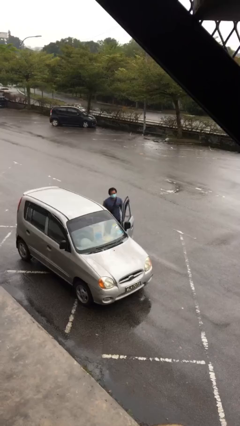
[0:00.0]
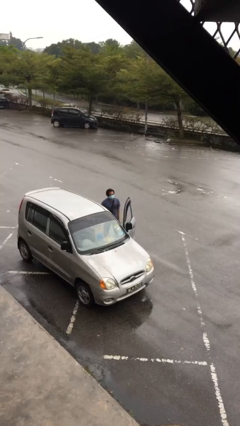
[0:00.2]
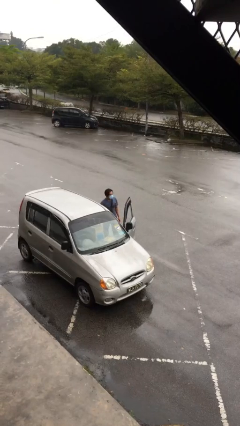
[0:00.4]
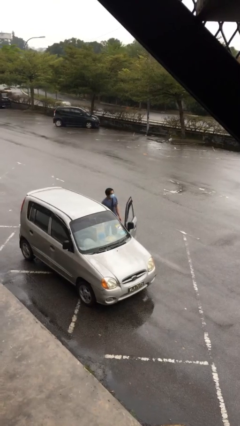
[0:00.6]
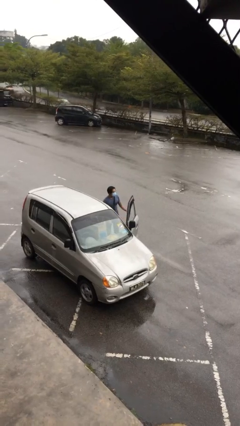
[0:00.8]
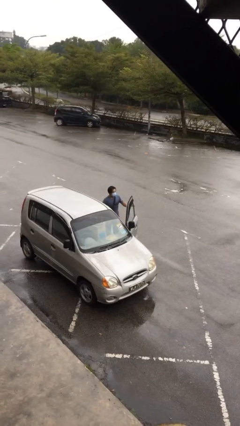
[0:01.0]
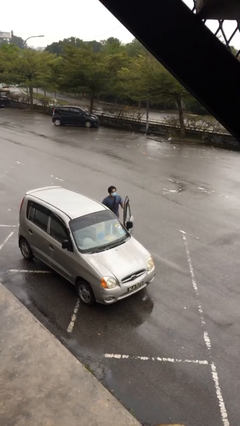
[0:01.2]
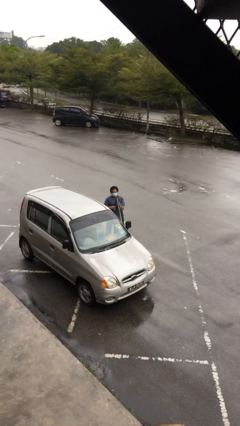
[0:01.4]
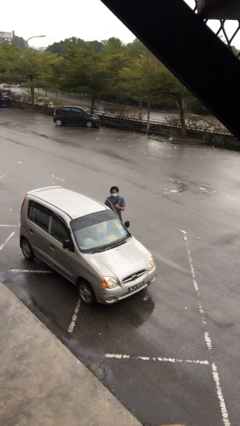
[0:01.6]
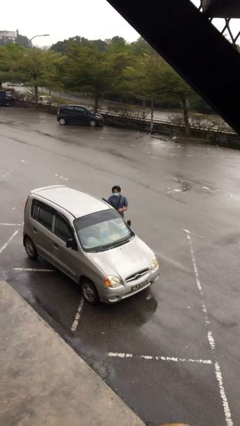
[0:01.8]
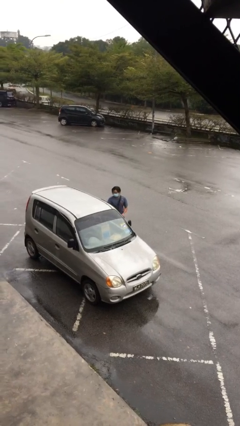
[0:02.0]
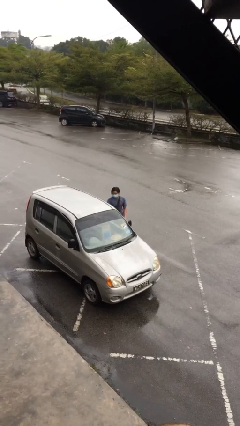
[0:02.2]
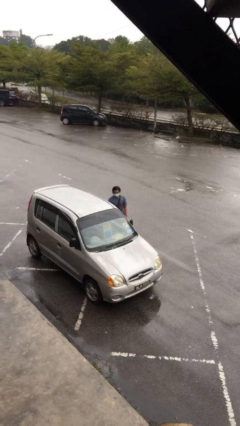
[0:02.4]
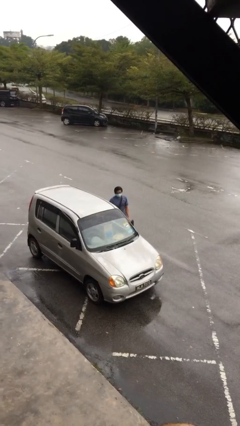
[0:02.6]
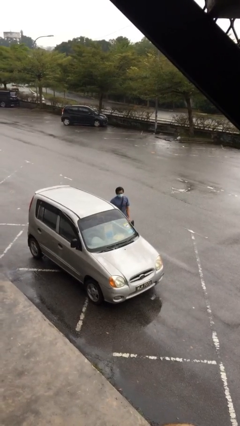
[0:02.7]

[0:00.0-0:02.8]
person closes car door

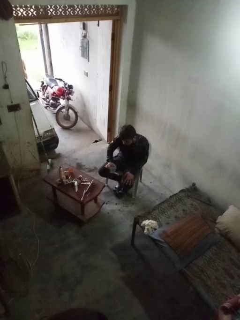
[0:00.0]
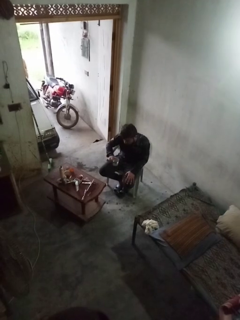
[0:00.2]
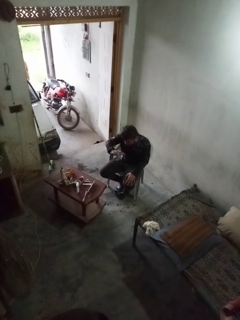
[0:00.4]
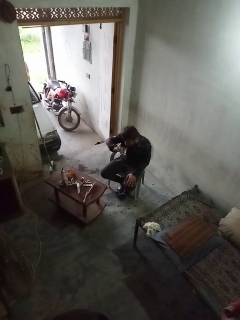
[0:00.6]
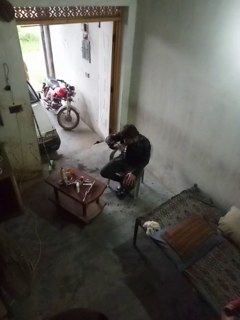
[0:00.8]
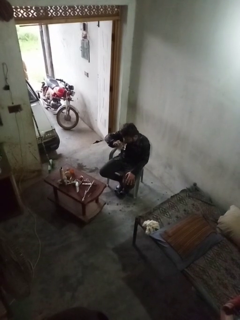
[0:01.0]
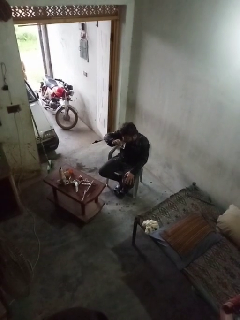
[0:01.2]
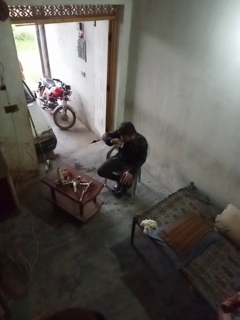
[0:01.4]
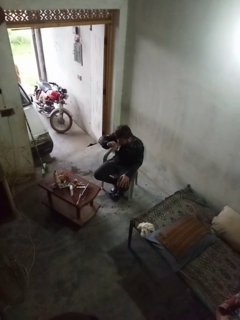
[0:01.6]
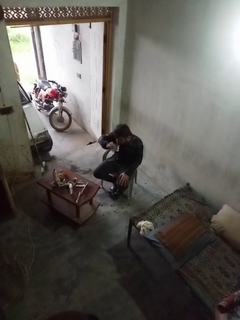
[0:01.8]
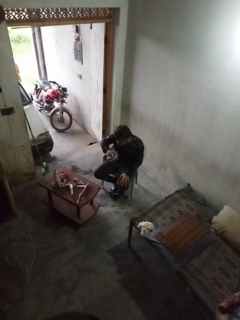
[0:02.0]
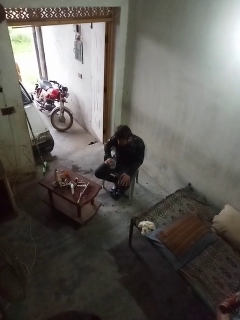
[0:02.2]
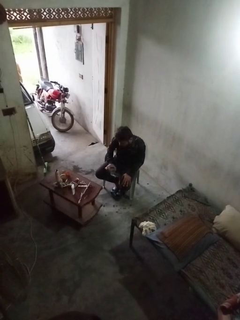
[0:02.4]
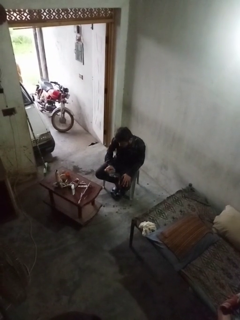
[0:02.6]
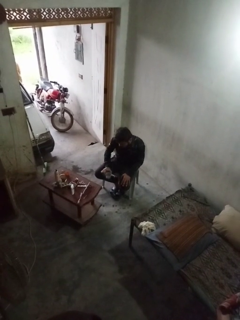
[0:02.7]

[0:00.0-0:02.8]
person drinks from shotglass

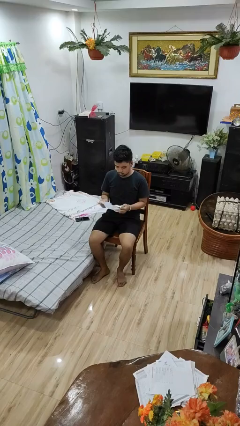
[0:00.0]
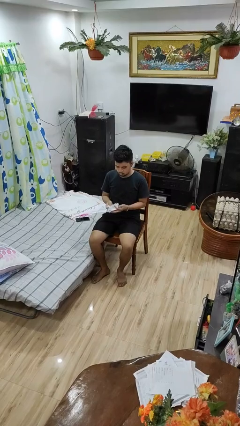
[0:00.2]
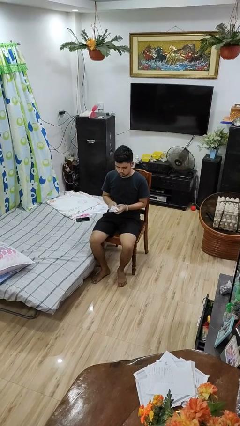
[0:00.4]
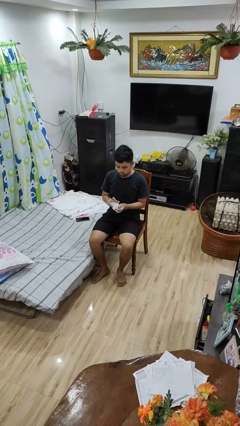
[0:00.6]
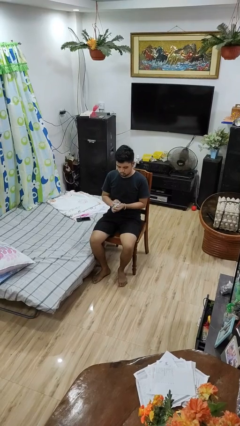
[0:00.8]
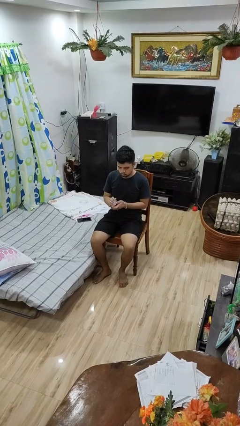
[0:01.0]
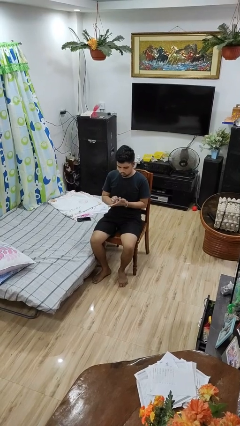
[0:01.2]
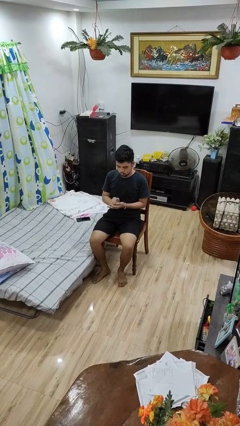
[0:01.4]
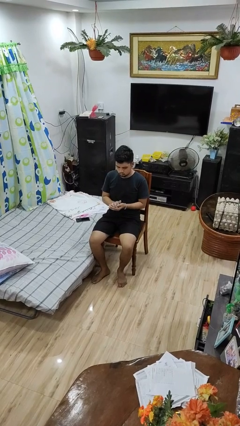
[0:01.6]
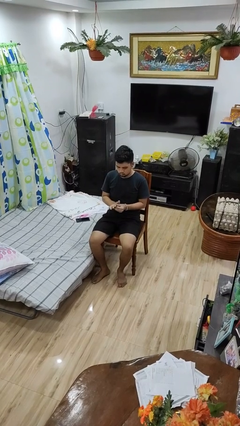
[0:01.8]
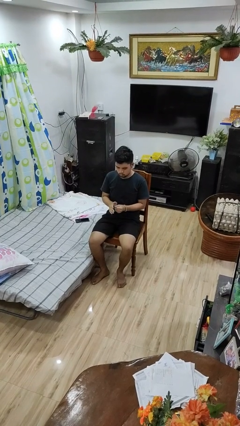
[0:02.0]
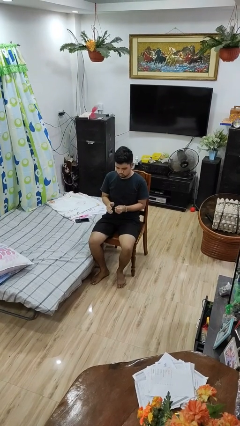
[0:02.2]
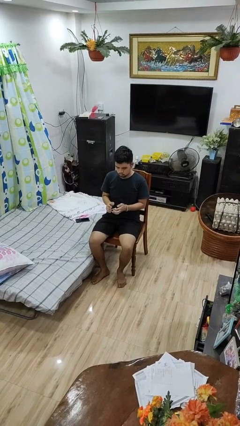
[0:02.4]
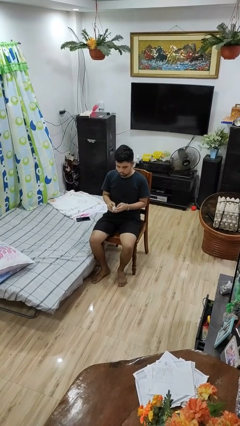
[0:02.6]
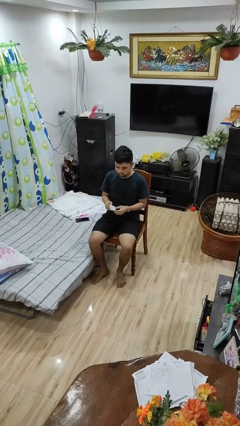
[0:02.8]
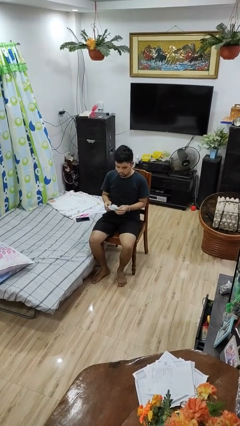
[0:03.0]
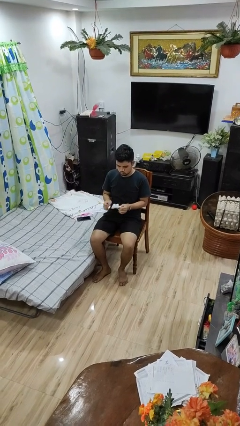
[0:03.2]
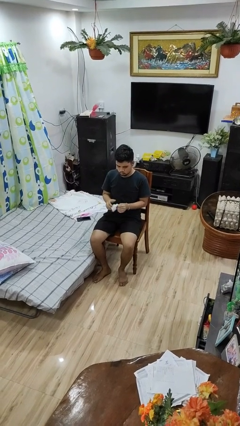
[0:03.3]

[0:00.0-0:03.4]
person crumples paper

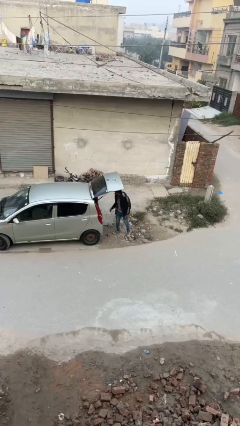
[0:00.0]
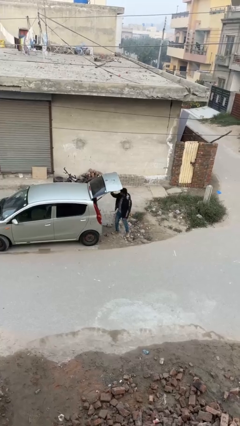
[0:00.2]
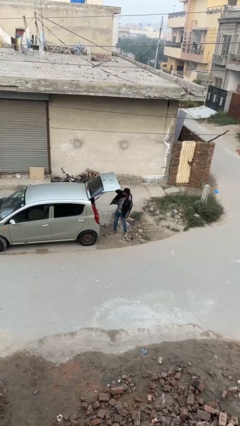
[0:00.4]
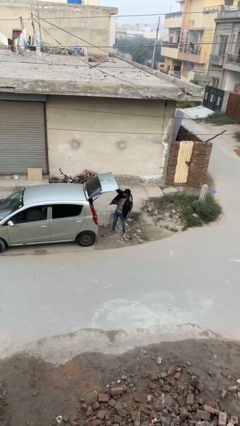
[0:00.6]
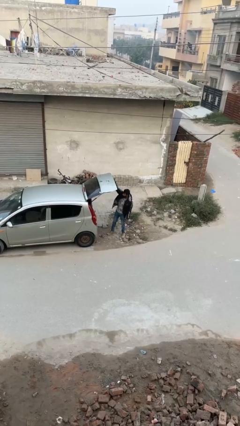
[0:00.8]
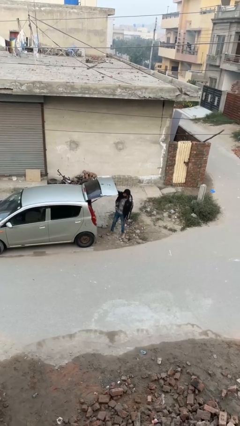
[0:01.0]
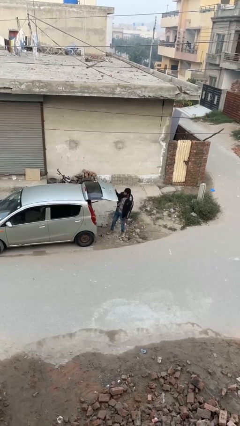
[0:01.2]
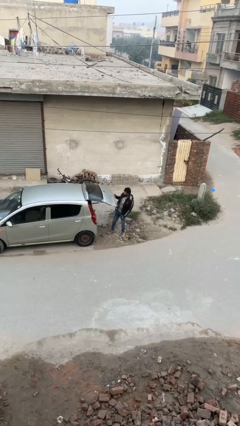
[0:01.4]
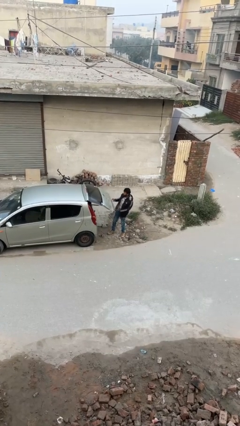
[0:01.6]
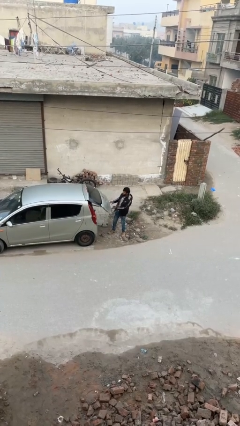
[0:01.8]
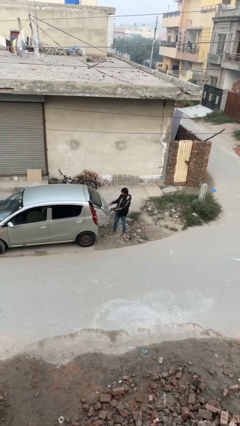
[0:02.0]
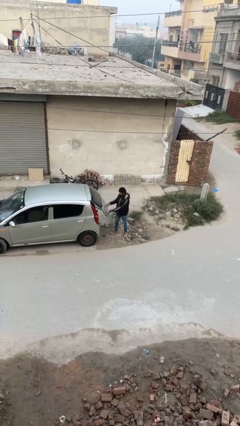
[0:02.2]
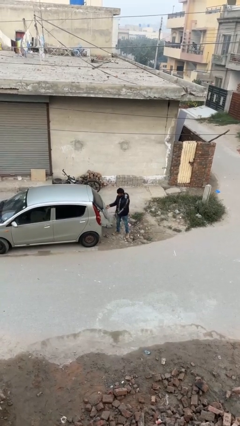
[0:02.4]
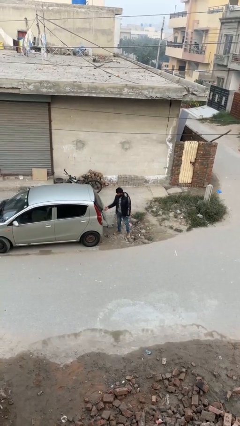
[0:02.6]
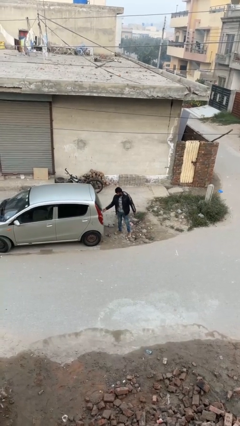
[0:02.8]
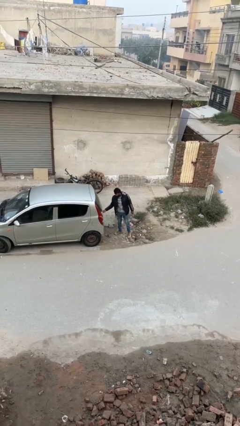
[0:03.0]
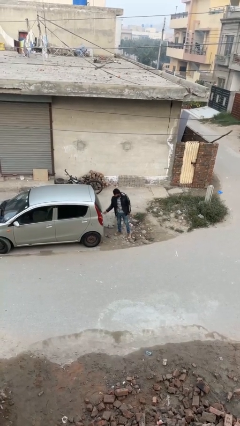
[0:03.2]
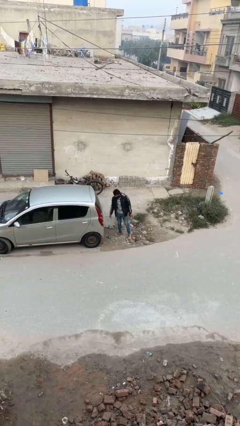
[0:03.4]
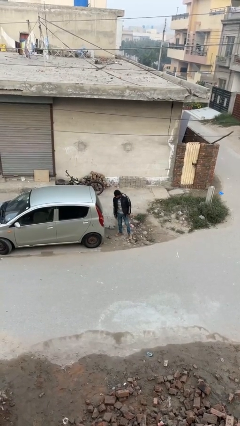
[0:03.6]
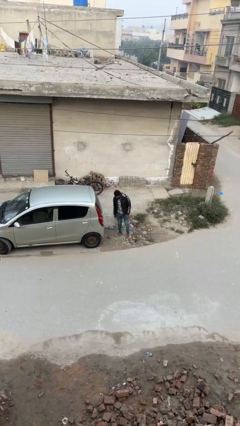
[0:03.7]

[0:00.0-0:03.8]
person closes car trunk

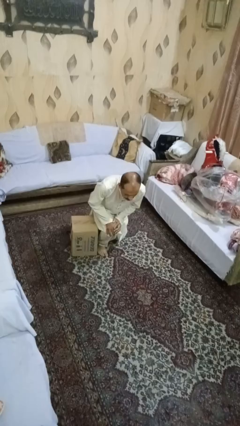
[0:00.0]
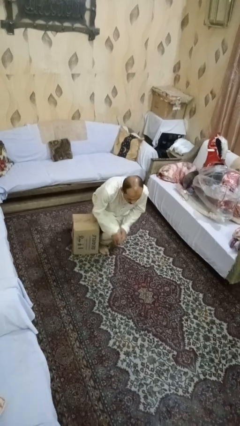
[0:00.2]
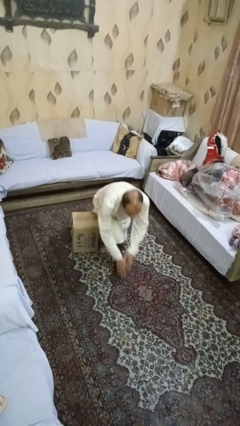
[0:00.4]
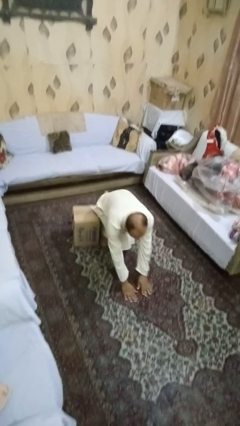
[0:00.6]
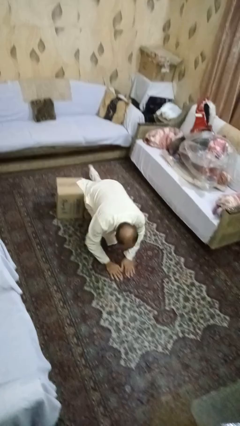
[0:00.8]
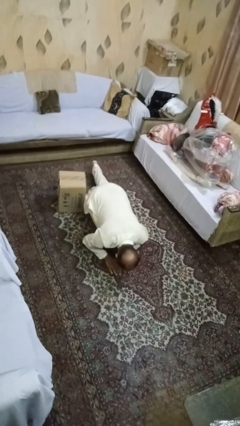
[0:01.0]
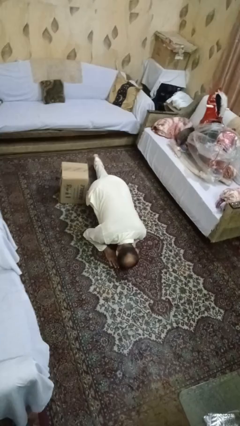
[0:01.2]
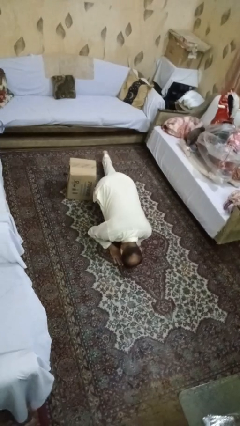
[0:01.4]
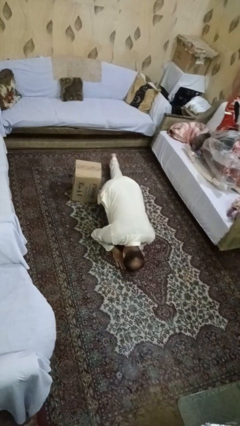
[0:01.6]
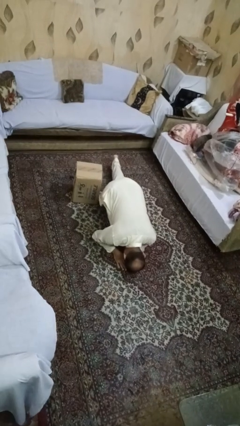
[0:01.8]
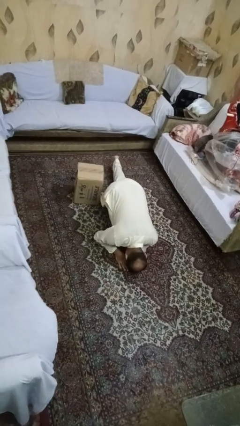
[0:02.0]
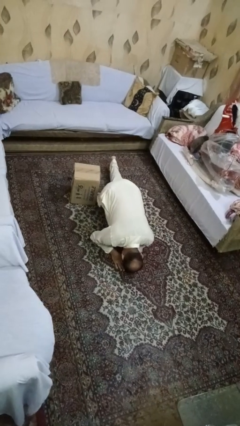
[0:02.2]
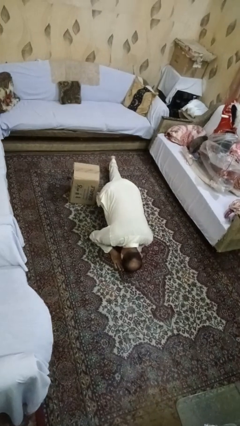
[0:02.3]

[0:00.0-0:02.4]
person lies down on floor

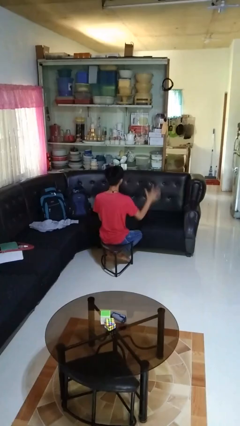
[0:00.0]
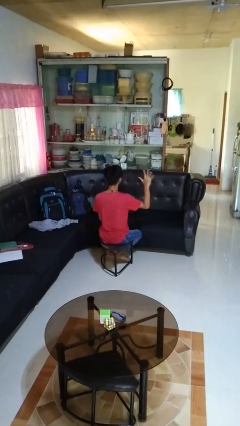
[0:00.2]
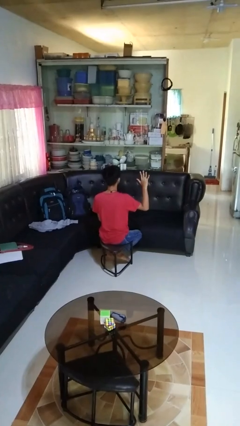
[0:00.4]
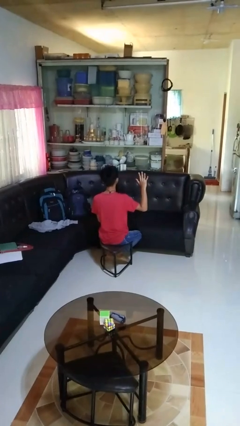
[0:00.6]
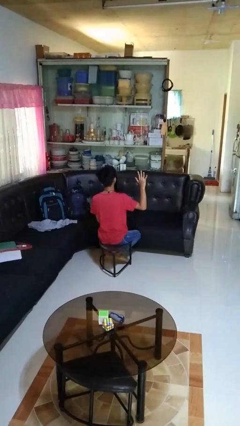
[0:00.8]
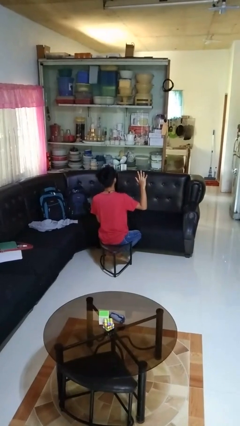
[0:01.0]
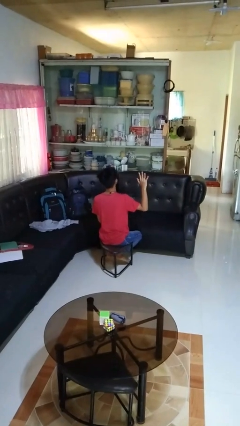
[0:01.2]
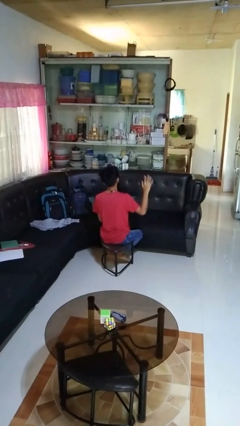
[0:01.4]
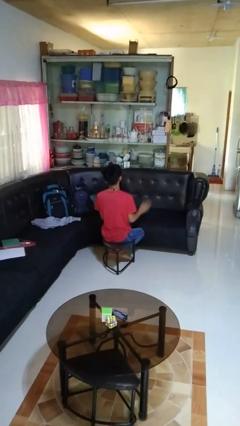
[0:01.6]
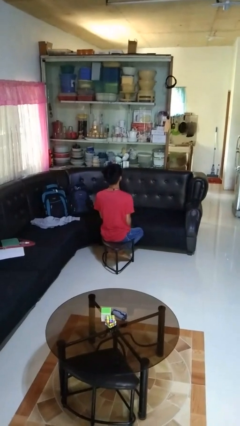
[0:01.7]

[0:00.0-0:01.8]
person gestures number five

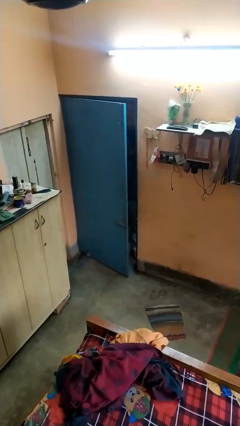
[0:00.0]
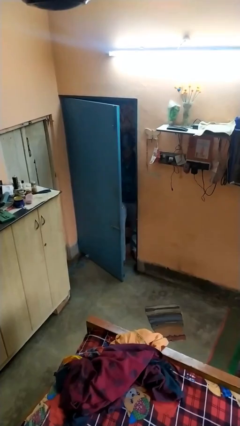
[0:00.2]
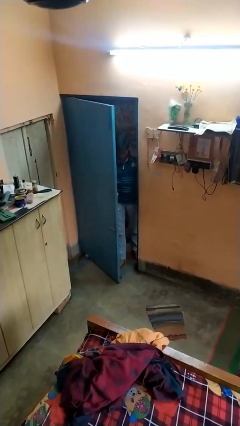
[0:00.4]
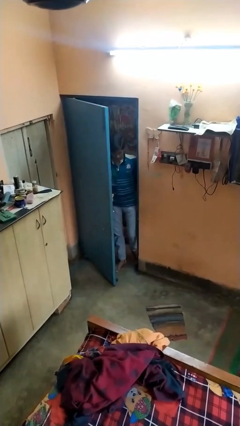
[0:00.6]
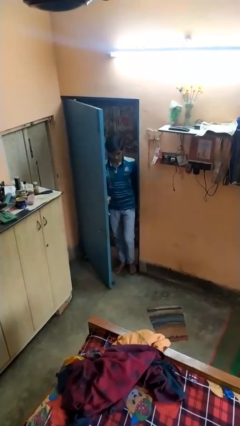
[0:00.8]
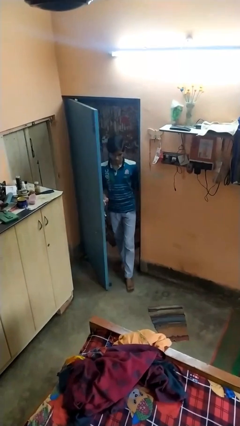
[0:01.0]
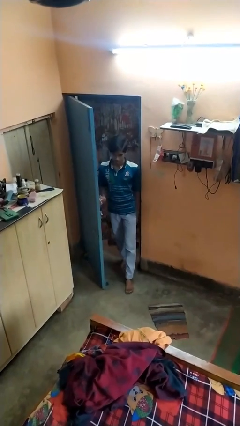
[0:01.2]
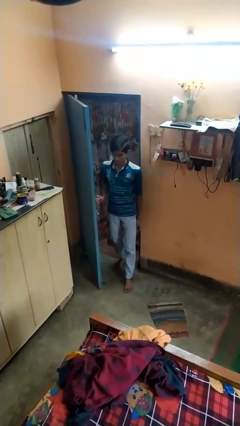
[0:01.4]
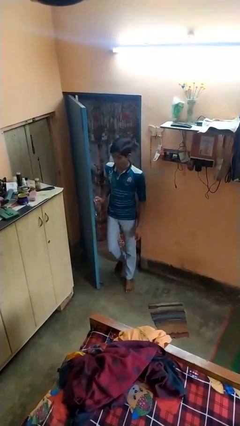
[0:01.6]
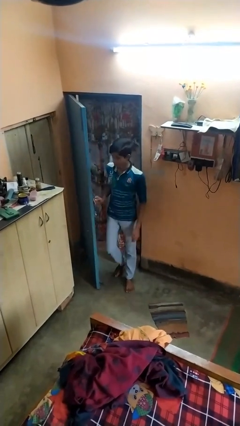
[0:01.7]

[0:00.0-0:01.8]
person opens facility door
